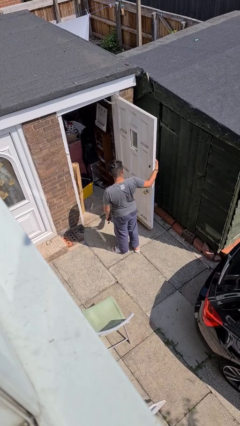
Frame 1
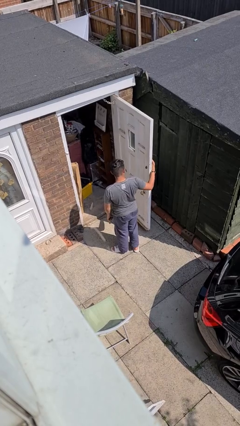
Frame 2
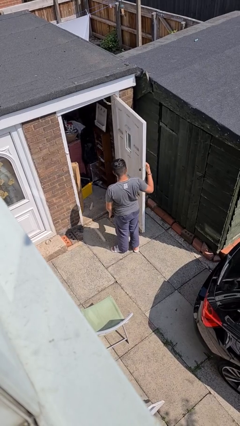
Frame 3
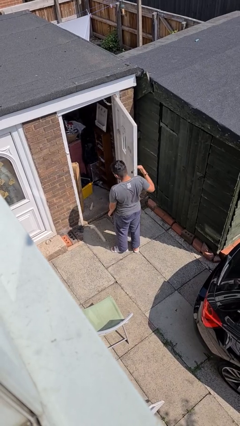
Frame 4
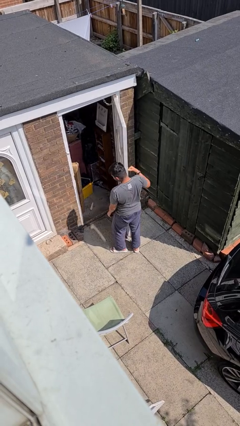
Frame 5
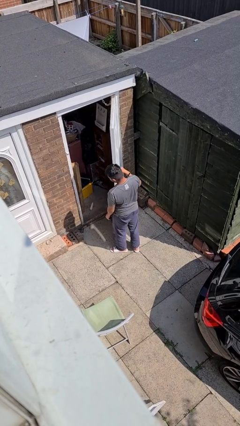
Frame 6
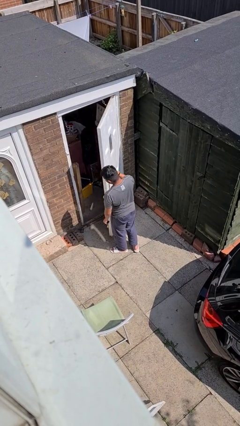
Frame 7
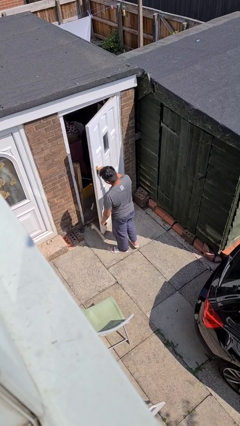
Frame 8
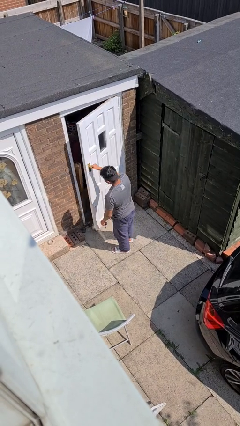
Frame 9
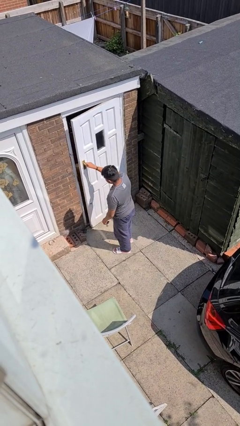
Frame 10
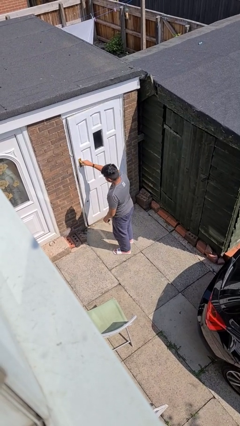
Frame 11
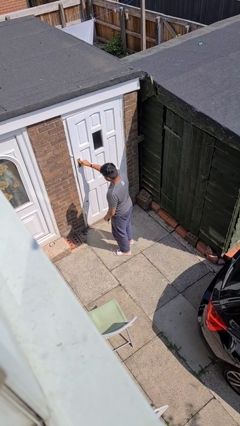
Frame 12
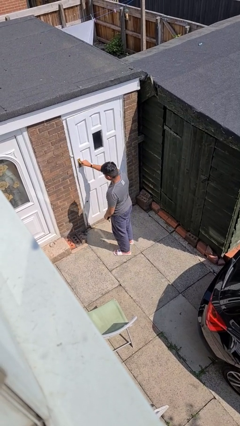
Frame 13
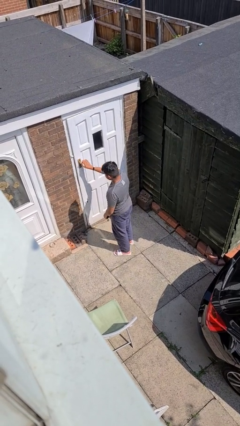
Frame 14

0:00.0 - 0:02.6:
person closes facility door

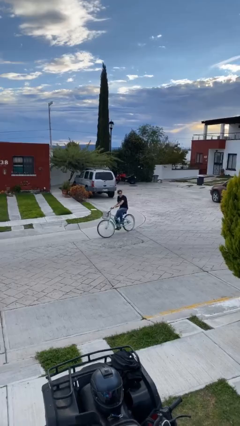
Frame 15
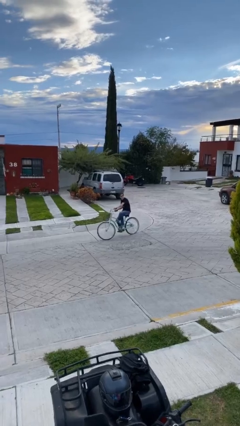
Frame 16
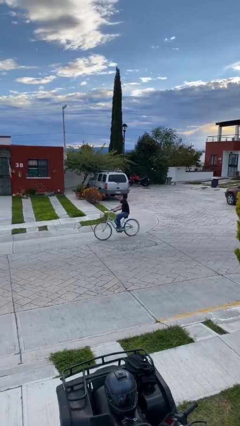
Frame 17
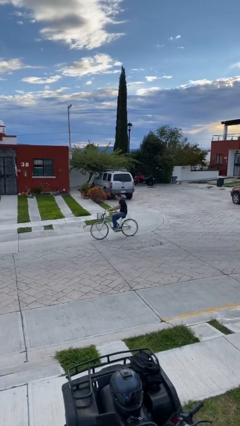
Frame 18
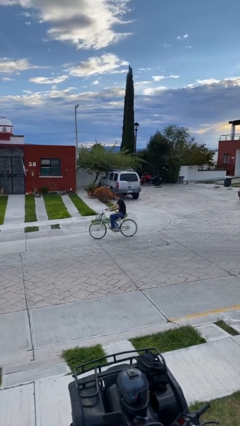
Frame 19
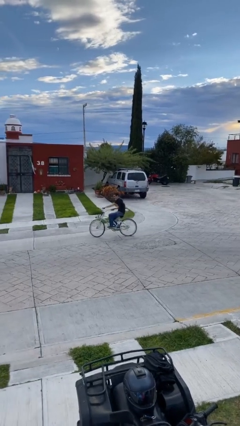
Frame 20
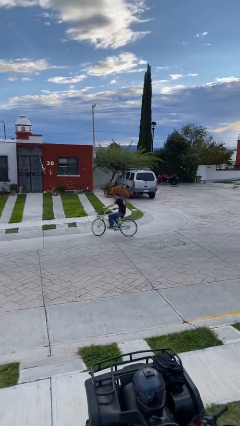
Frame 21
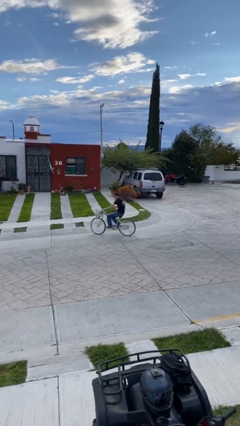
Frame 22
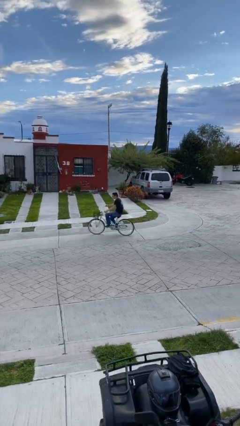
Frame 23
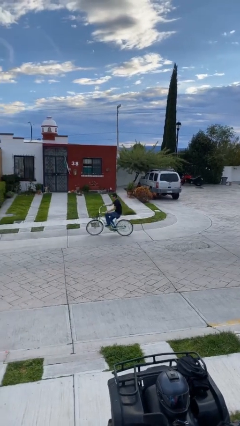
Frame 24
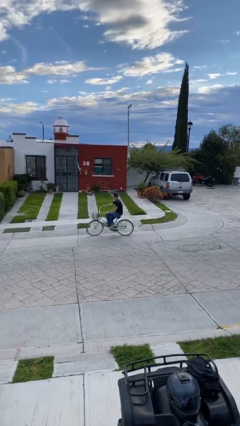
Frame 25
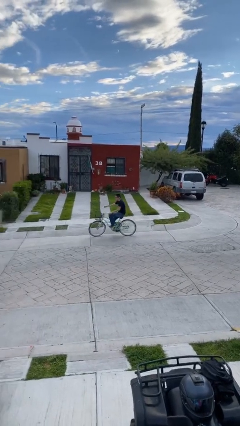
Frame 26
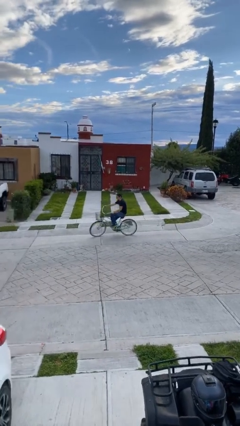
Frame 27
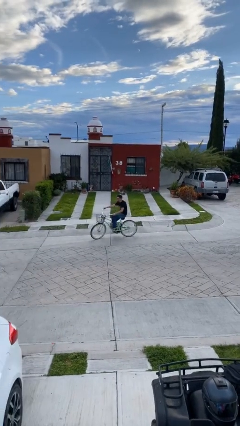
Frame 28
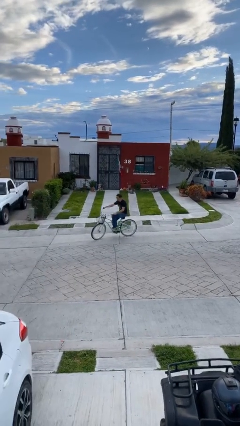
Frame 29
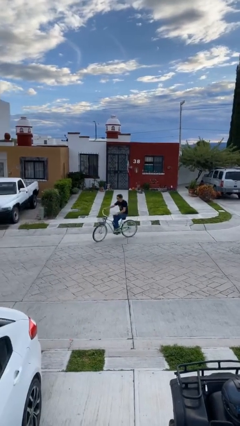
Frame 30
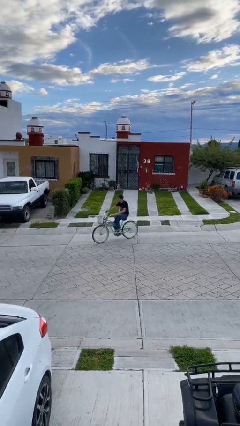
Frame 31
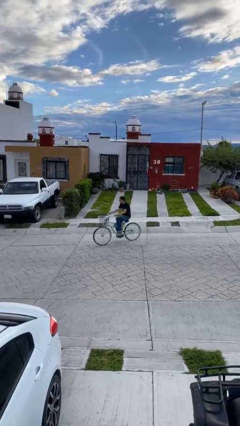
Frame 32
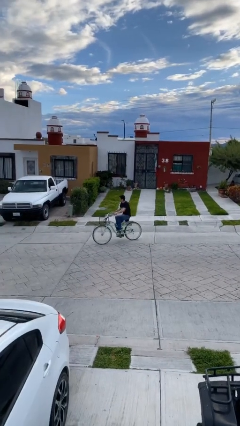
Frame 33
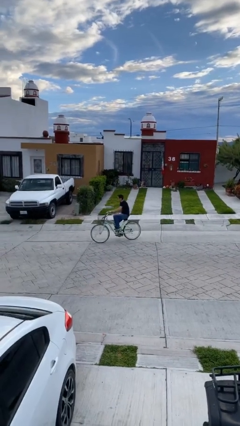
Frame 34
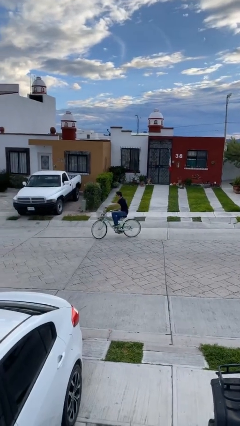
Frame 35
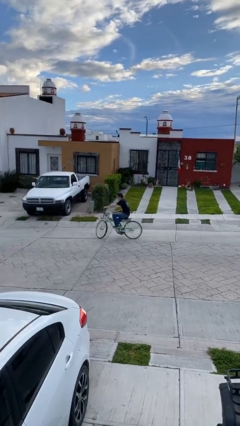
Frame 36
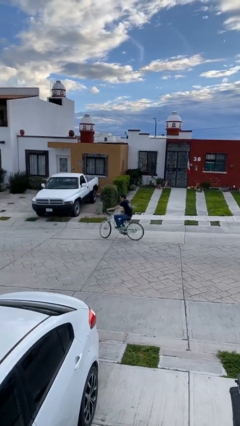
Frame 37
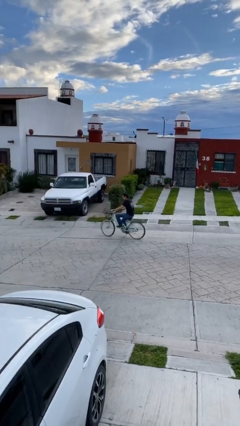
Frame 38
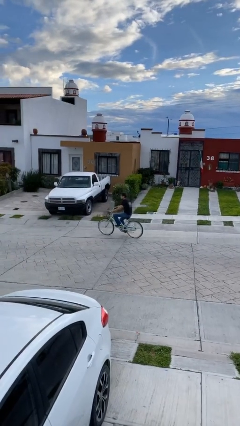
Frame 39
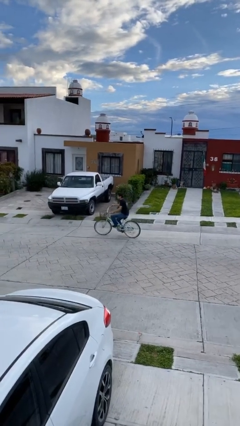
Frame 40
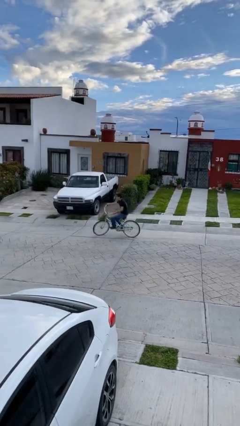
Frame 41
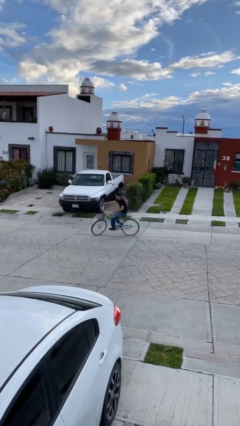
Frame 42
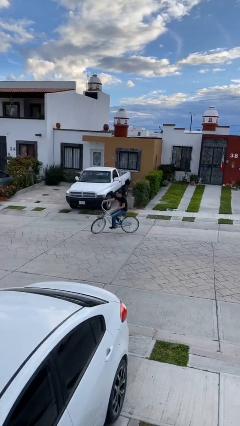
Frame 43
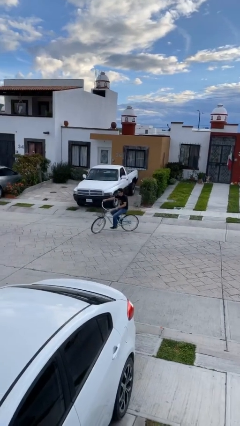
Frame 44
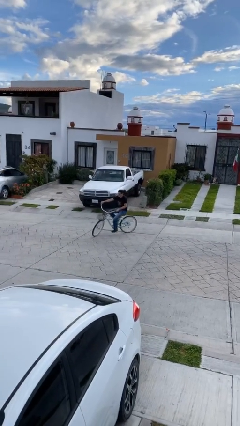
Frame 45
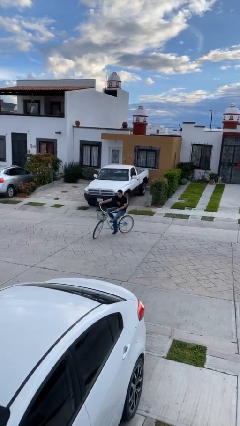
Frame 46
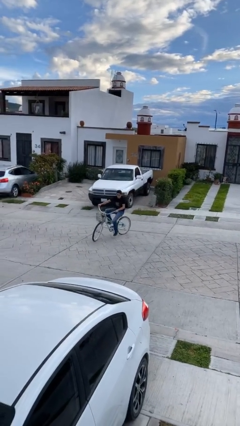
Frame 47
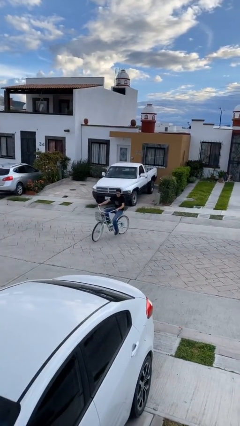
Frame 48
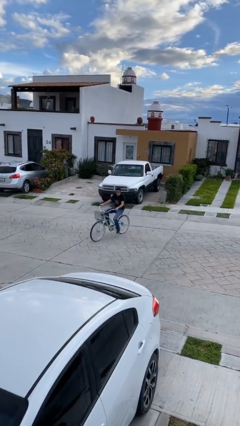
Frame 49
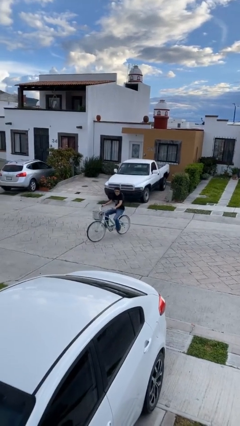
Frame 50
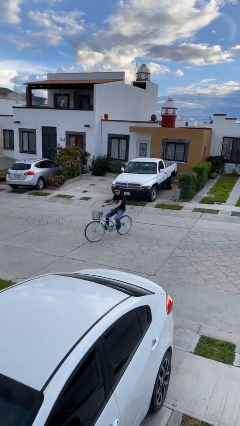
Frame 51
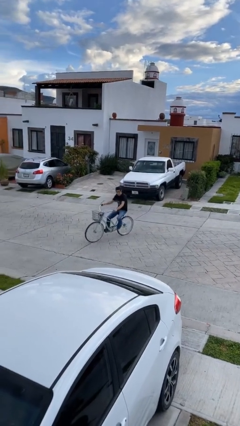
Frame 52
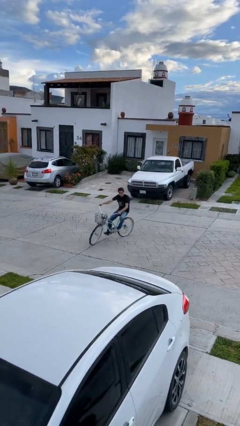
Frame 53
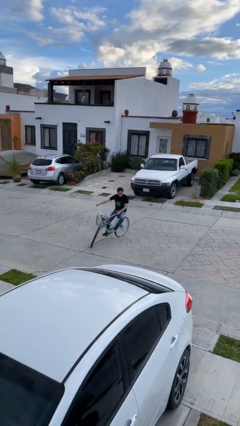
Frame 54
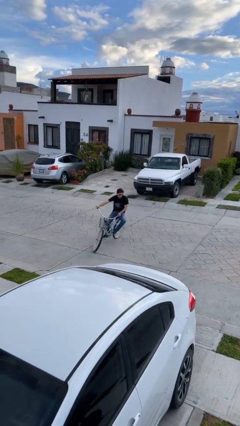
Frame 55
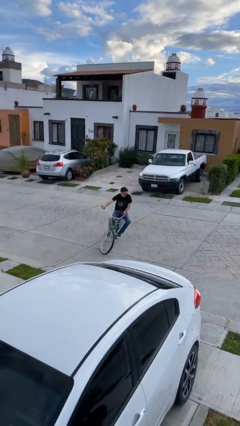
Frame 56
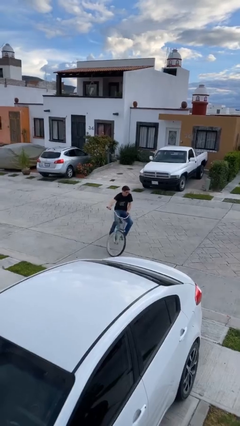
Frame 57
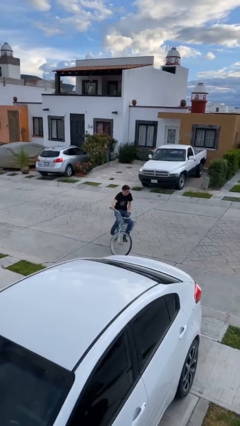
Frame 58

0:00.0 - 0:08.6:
person rides bicycle

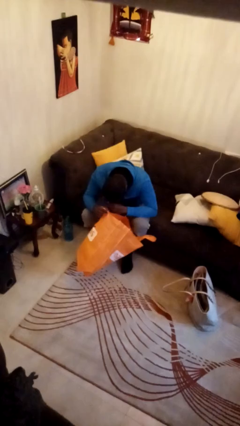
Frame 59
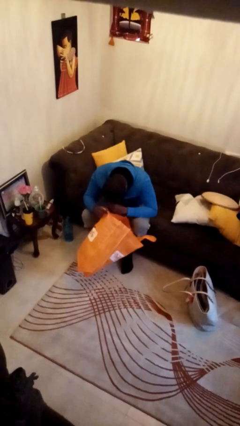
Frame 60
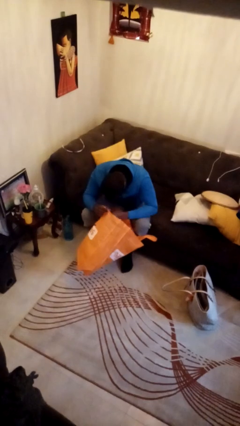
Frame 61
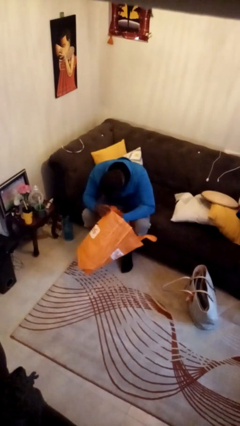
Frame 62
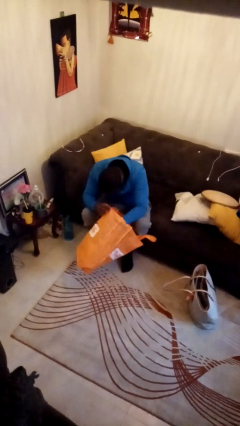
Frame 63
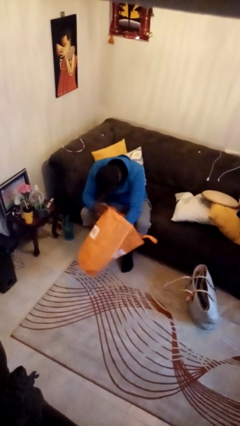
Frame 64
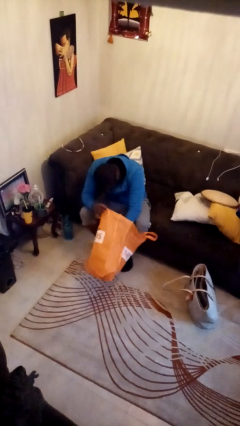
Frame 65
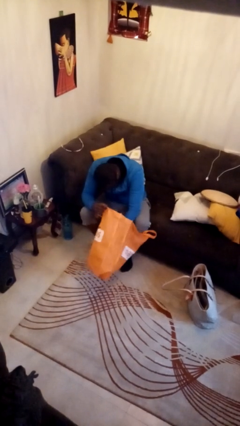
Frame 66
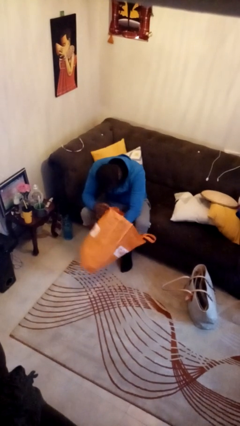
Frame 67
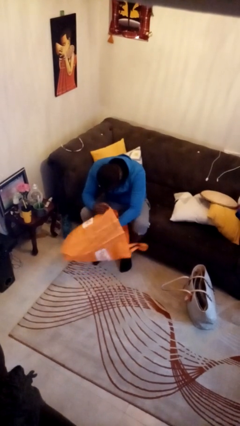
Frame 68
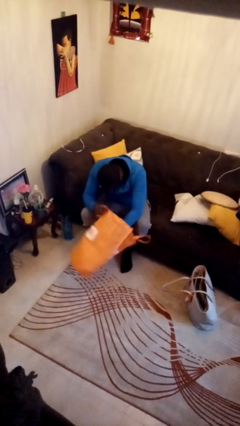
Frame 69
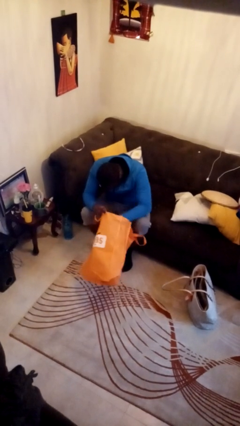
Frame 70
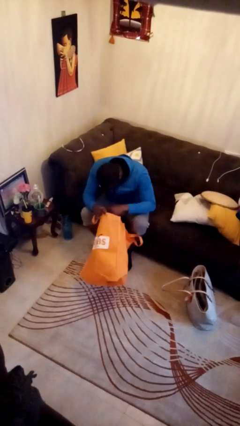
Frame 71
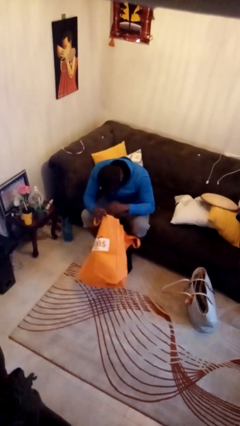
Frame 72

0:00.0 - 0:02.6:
person searches in bag

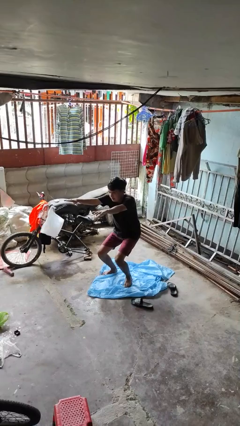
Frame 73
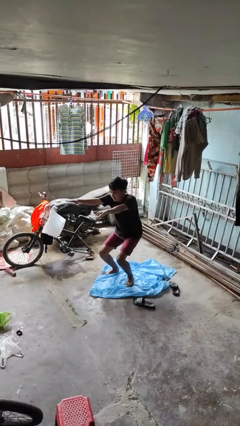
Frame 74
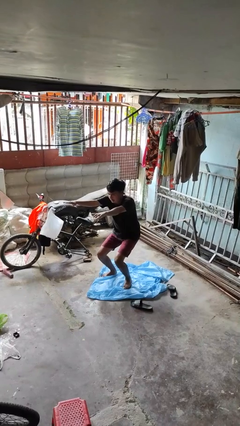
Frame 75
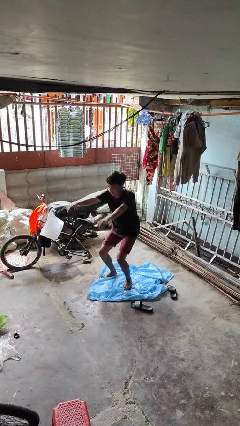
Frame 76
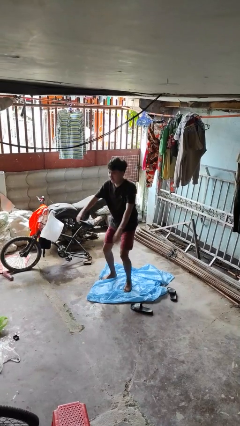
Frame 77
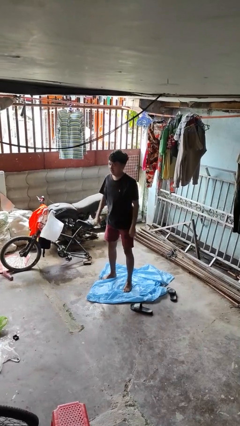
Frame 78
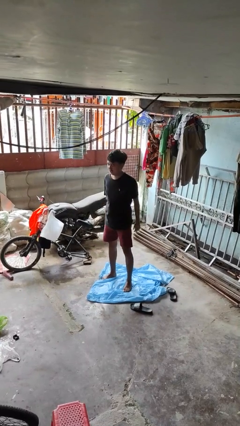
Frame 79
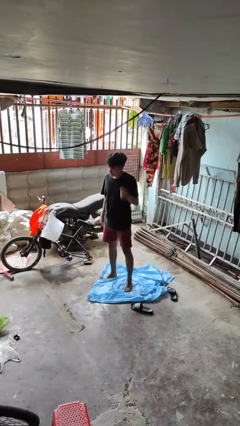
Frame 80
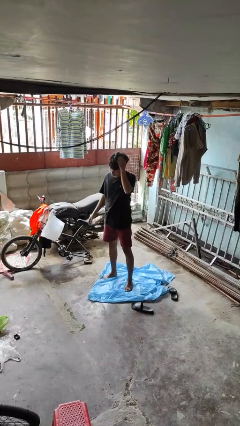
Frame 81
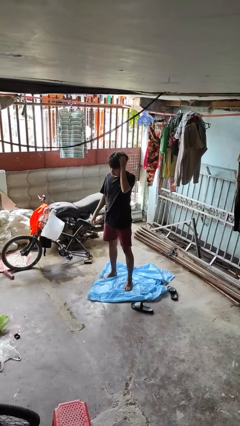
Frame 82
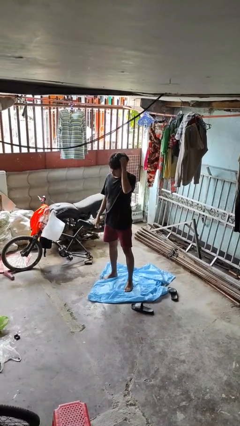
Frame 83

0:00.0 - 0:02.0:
person stands up

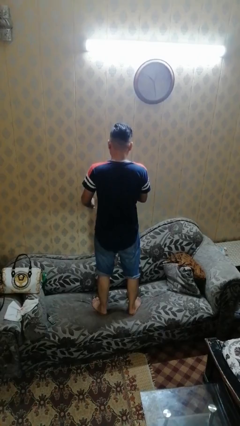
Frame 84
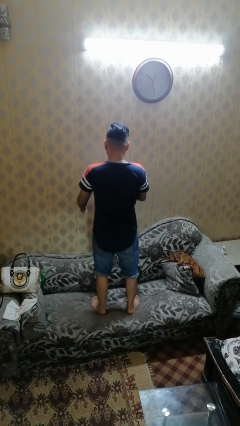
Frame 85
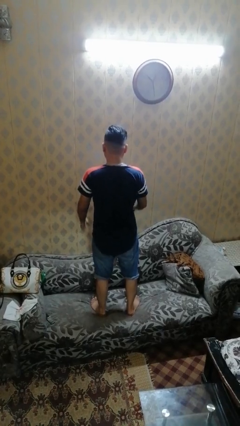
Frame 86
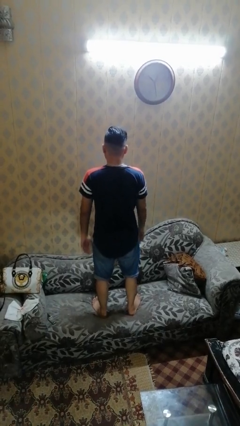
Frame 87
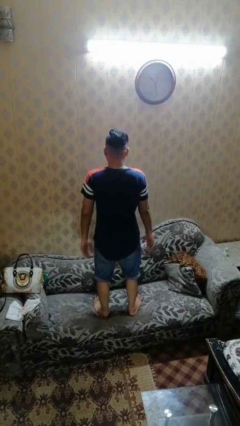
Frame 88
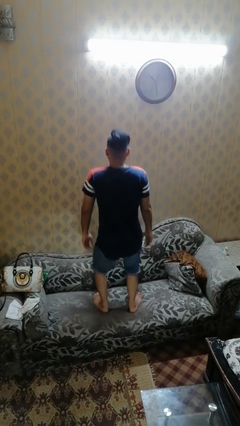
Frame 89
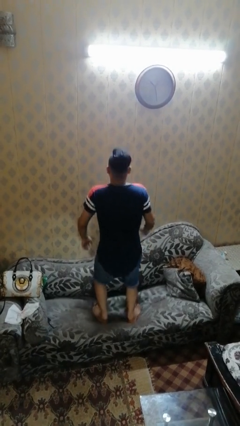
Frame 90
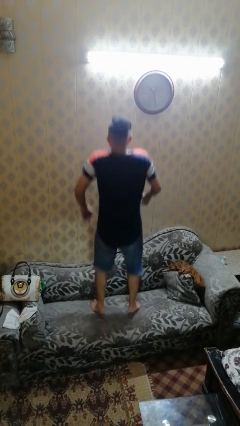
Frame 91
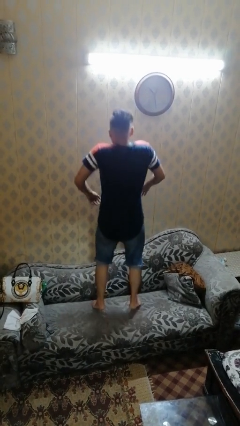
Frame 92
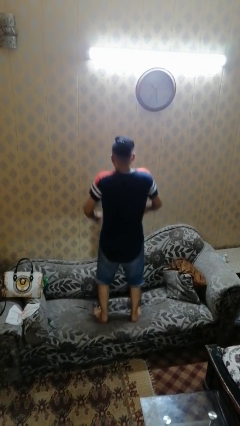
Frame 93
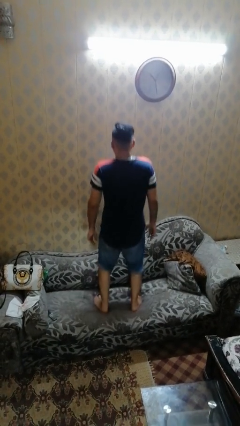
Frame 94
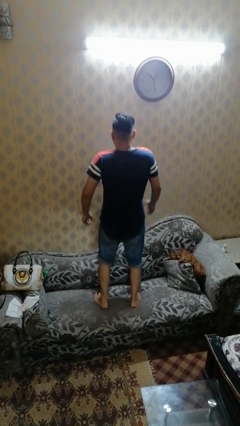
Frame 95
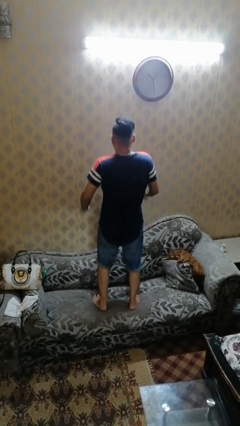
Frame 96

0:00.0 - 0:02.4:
person jumps on couch
